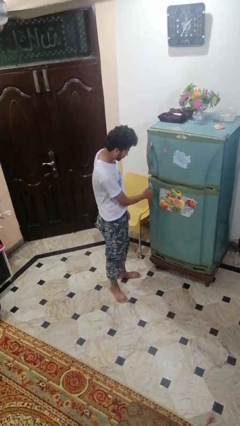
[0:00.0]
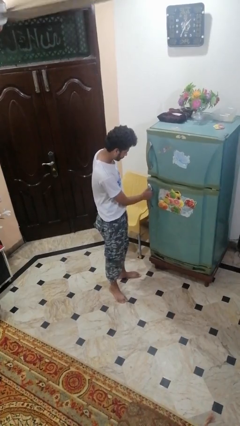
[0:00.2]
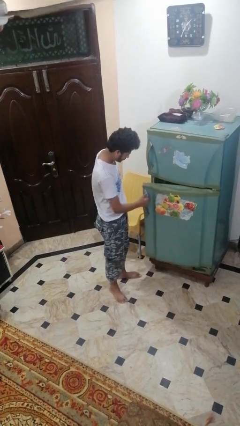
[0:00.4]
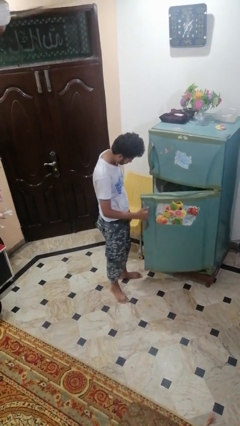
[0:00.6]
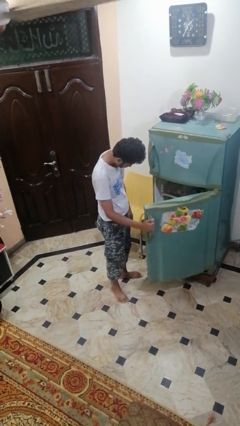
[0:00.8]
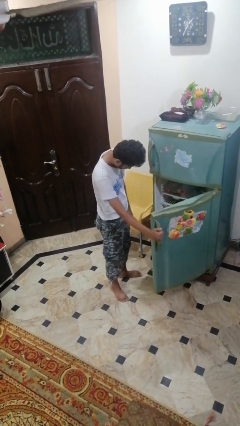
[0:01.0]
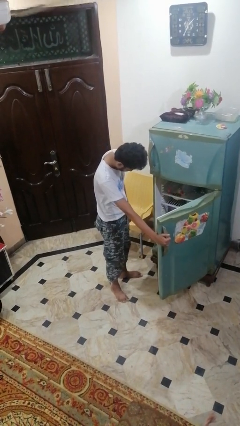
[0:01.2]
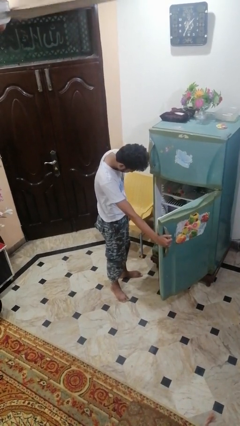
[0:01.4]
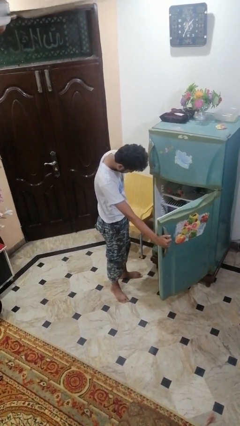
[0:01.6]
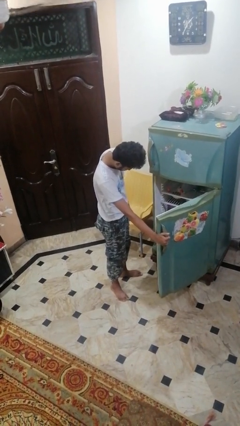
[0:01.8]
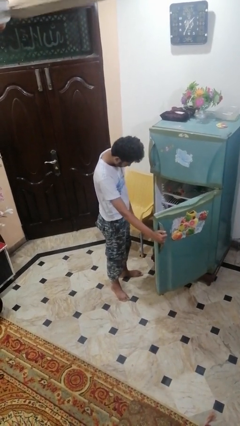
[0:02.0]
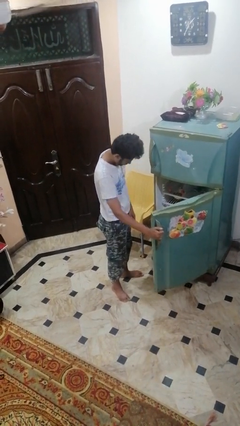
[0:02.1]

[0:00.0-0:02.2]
person opens refrigerator

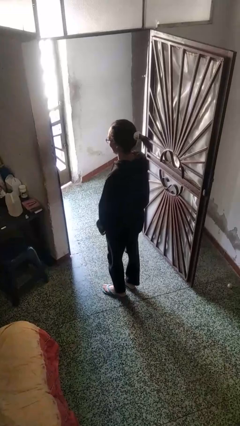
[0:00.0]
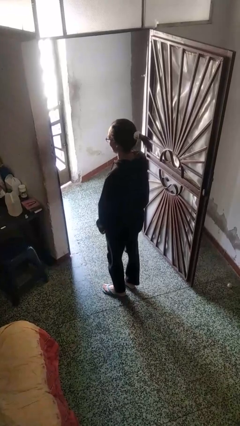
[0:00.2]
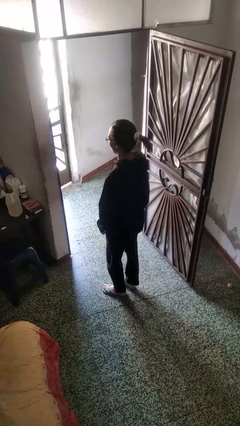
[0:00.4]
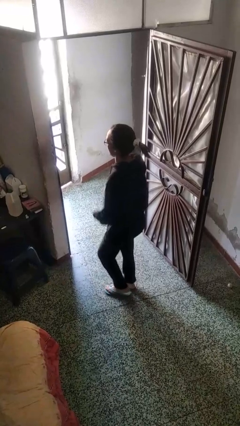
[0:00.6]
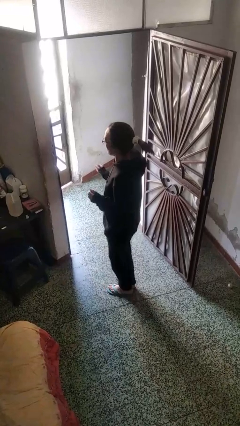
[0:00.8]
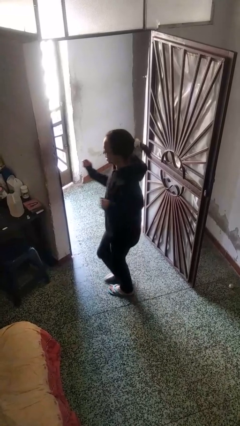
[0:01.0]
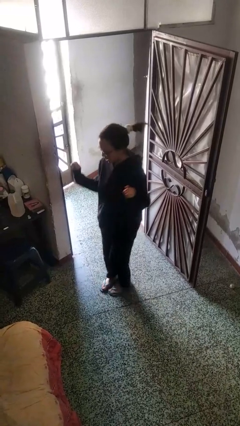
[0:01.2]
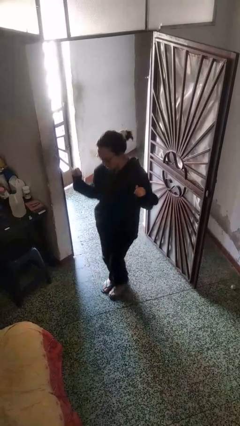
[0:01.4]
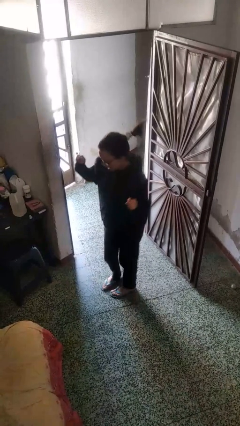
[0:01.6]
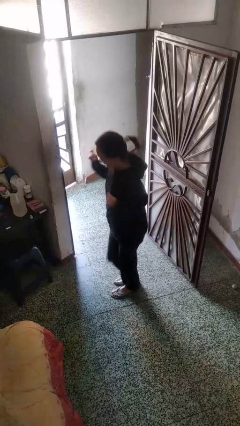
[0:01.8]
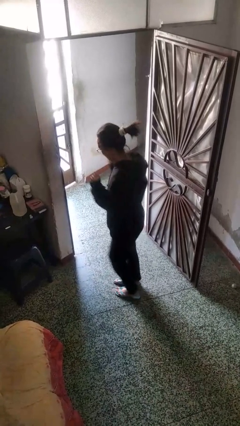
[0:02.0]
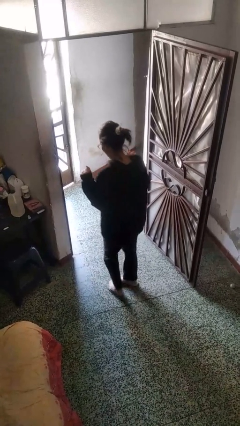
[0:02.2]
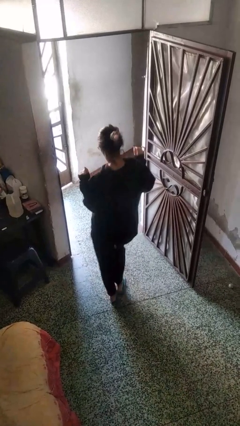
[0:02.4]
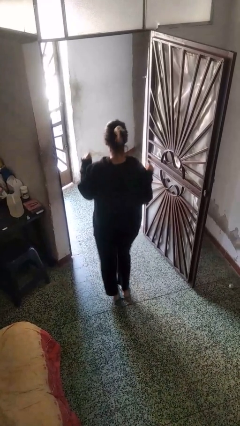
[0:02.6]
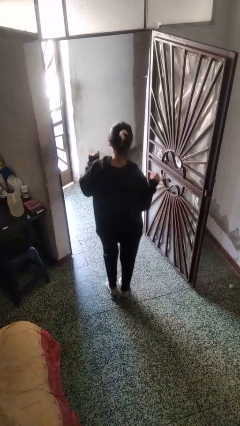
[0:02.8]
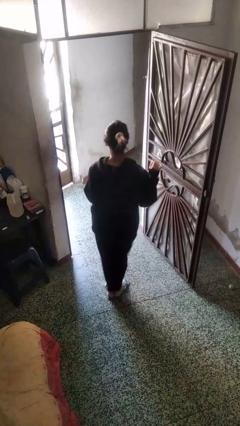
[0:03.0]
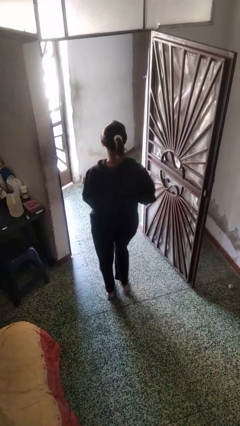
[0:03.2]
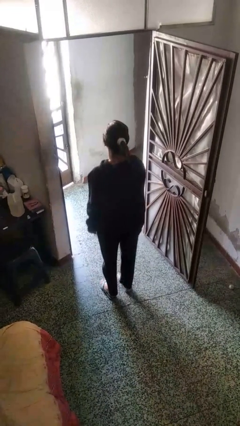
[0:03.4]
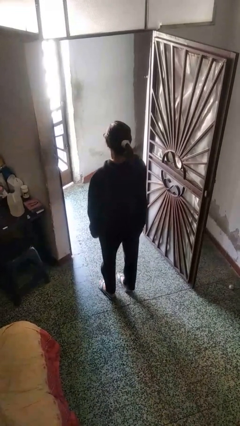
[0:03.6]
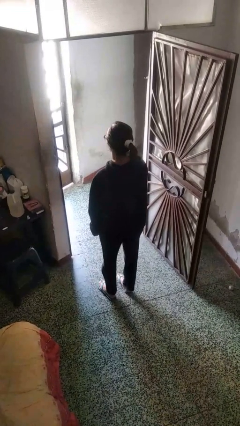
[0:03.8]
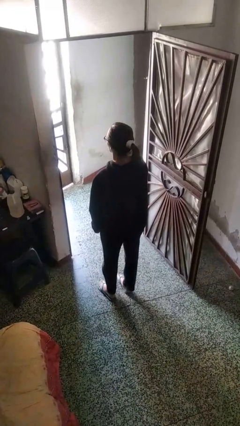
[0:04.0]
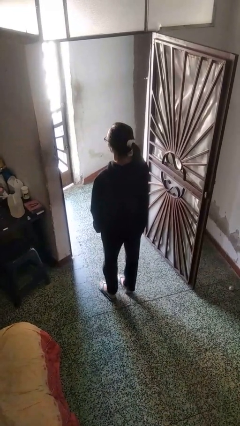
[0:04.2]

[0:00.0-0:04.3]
person dances in place

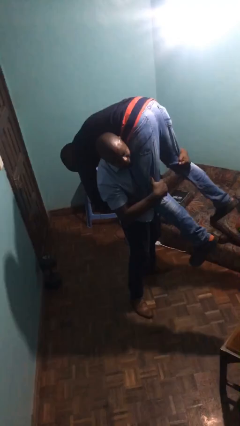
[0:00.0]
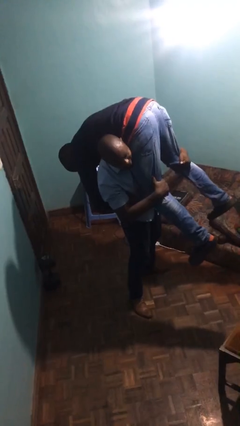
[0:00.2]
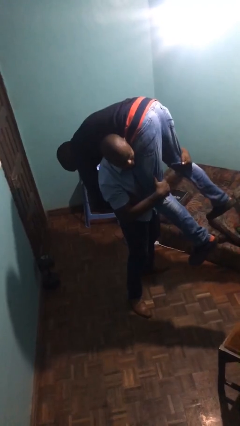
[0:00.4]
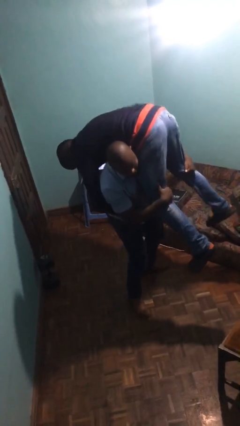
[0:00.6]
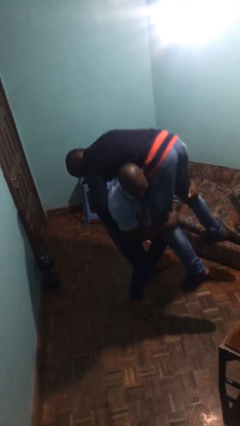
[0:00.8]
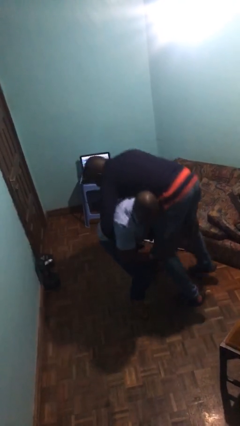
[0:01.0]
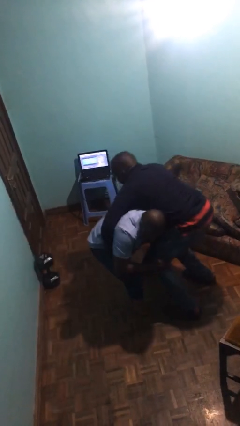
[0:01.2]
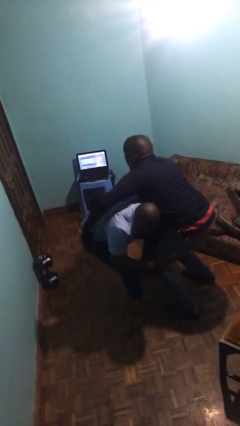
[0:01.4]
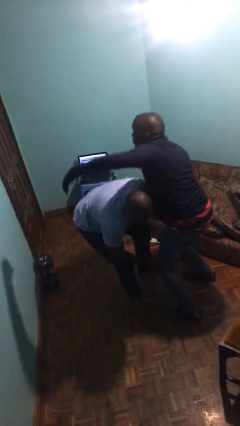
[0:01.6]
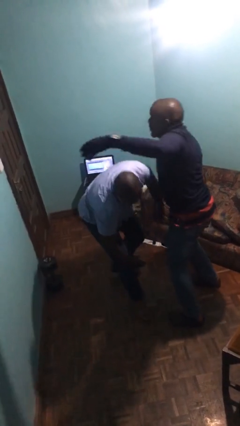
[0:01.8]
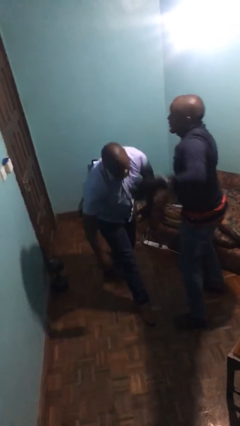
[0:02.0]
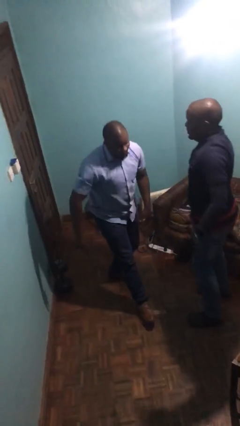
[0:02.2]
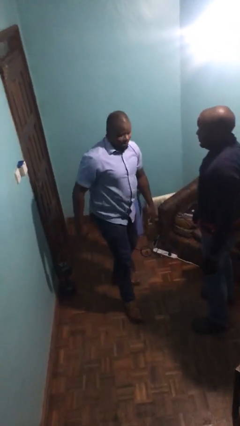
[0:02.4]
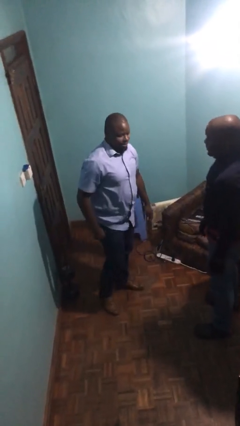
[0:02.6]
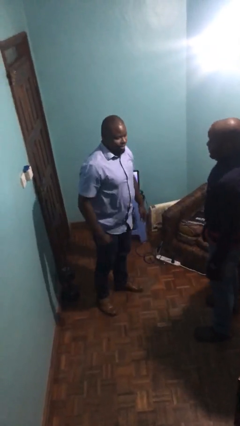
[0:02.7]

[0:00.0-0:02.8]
person puts down person

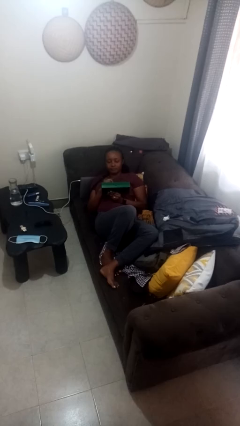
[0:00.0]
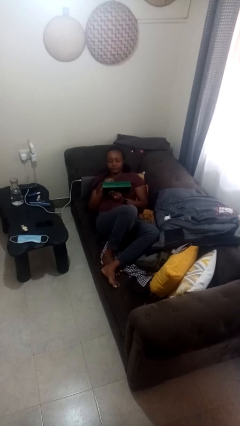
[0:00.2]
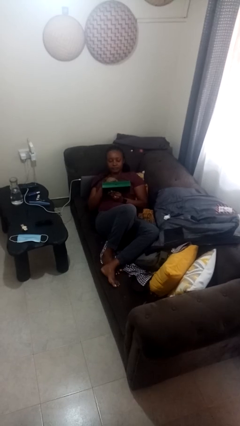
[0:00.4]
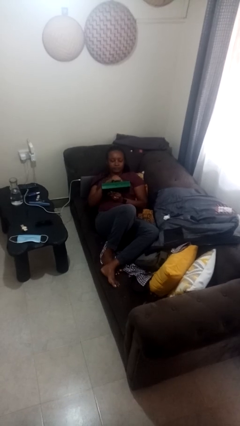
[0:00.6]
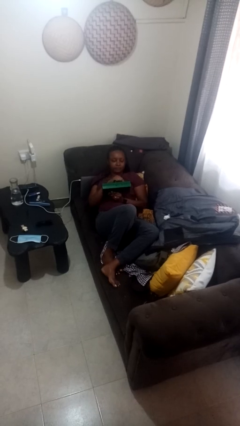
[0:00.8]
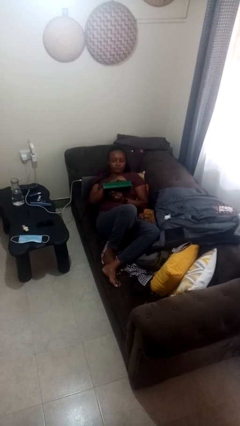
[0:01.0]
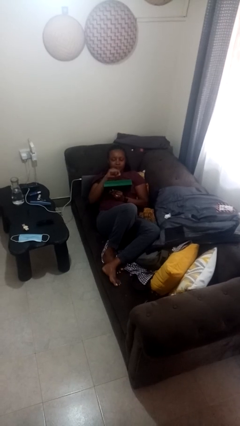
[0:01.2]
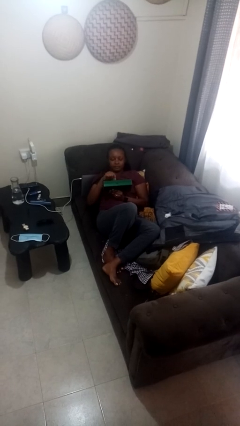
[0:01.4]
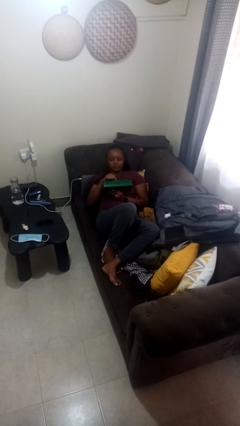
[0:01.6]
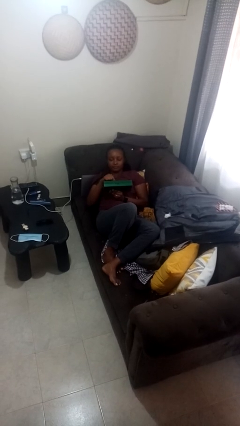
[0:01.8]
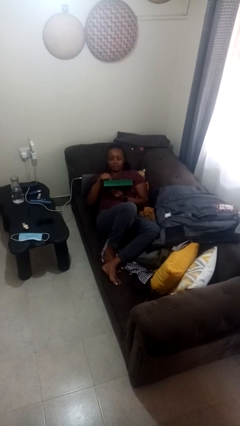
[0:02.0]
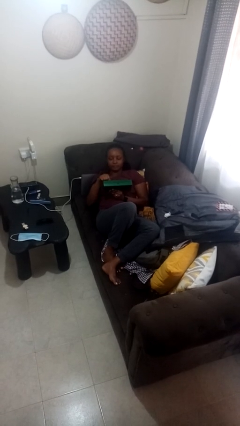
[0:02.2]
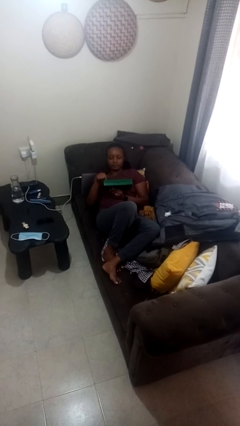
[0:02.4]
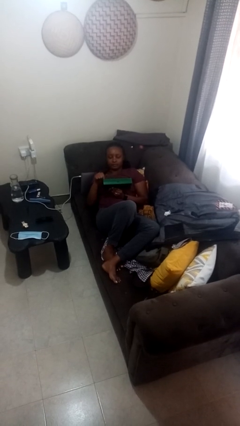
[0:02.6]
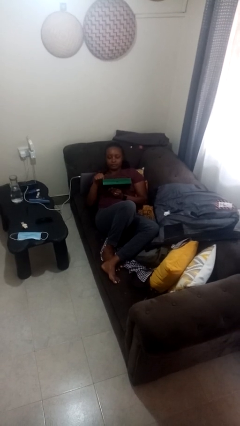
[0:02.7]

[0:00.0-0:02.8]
person interacts with handheld game

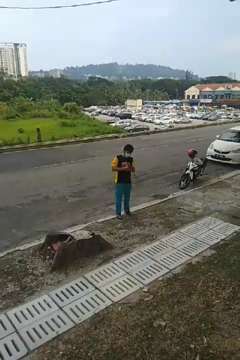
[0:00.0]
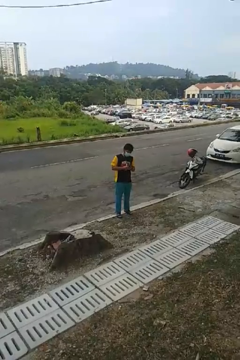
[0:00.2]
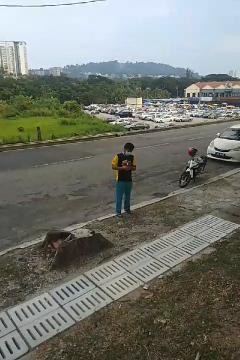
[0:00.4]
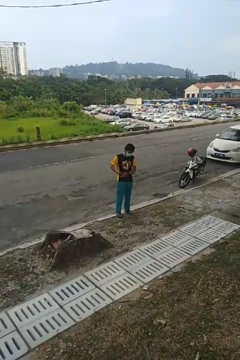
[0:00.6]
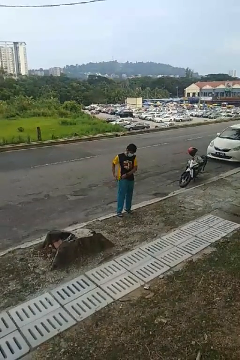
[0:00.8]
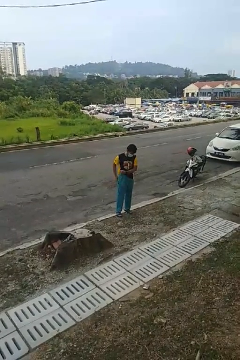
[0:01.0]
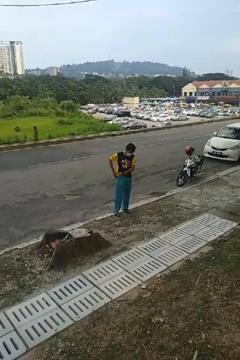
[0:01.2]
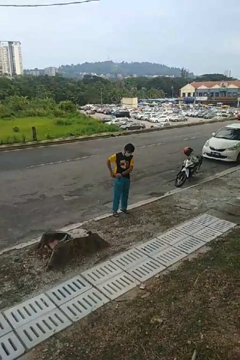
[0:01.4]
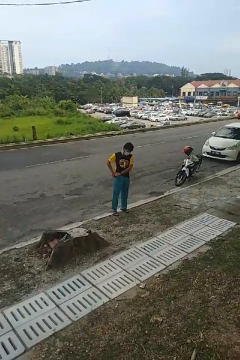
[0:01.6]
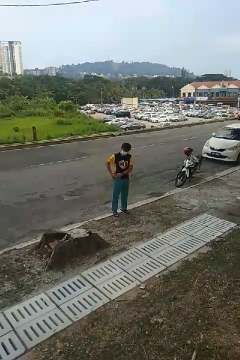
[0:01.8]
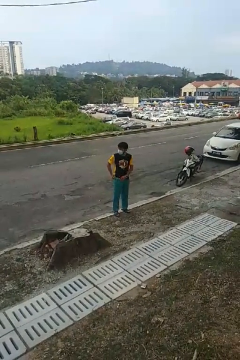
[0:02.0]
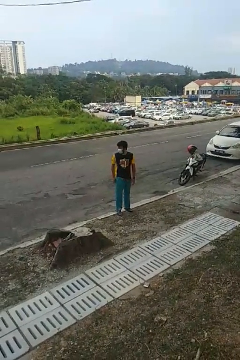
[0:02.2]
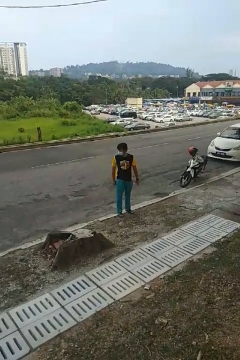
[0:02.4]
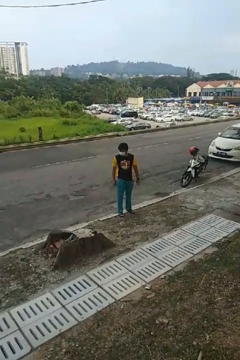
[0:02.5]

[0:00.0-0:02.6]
person puts phone into pocket

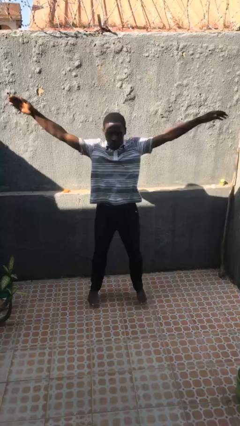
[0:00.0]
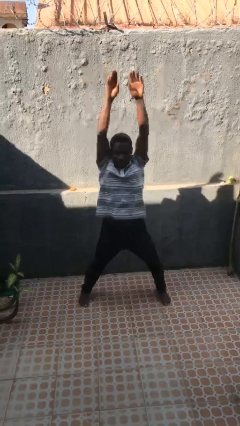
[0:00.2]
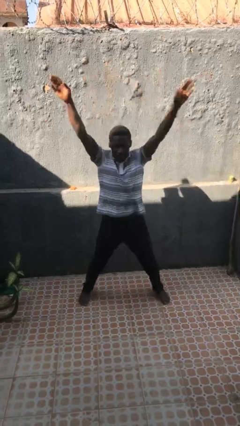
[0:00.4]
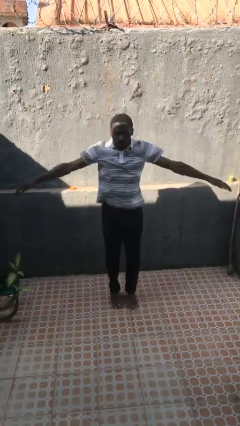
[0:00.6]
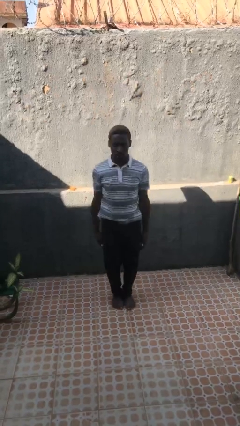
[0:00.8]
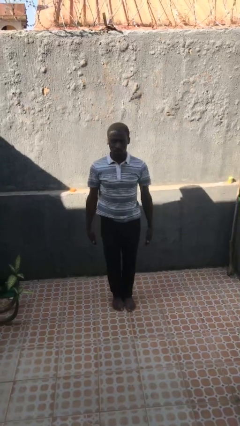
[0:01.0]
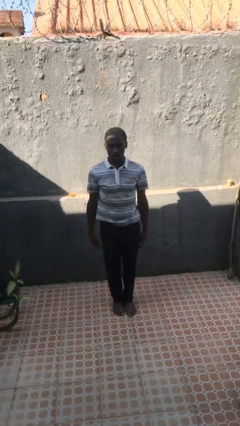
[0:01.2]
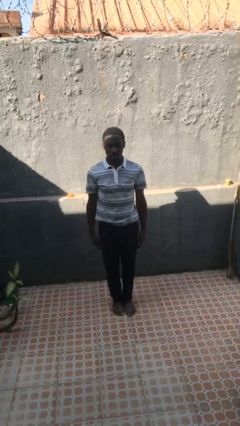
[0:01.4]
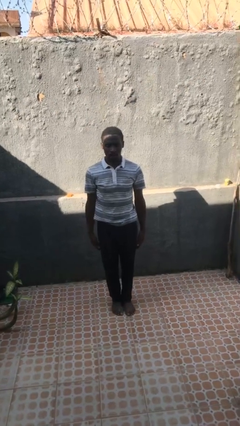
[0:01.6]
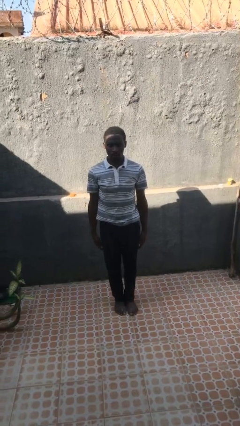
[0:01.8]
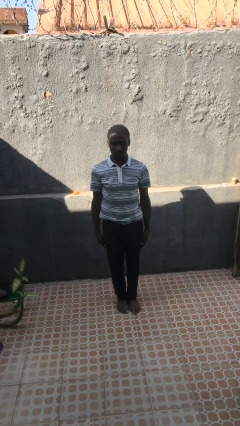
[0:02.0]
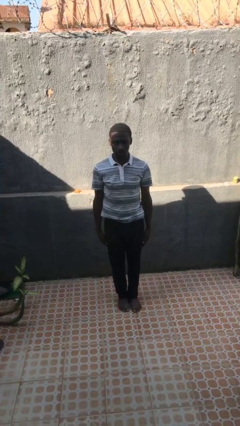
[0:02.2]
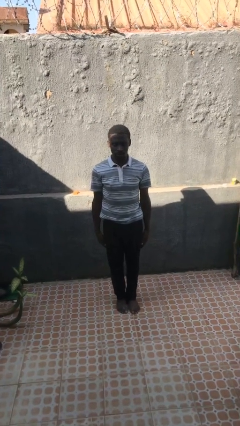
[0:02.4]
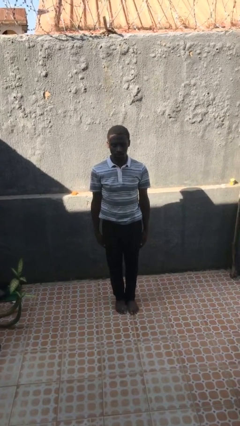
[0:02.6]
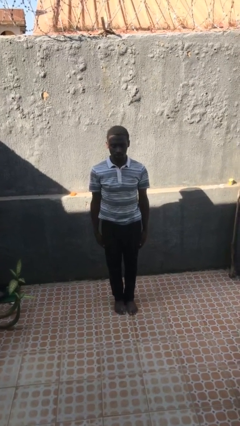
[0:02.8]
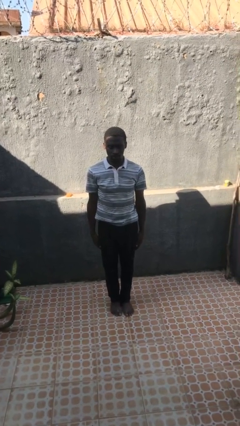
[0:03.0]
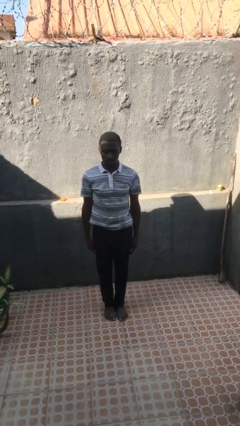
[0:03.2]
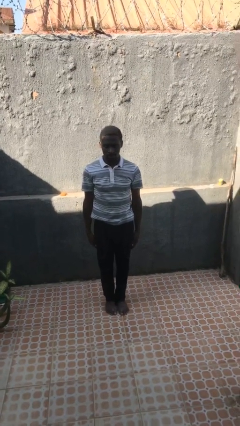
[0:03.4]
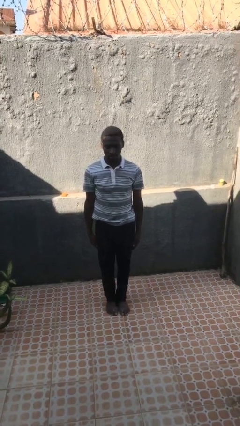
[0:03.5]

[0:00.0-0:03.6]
person exercises with jumping jacks
